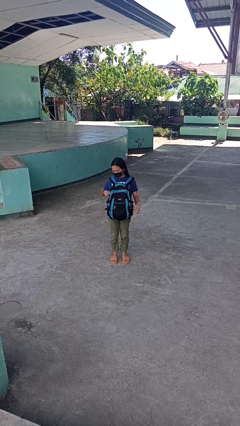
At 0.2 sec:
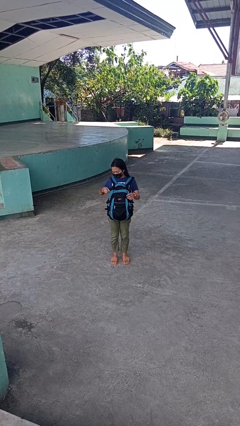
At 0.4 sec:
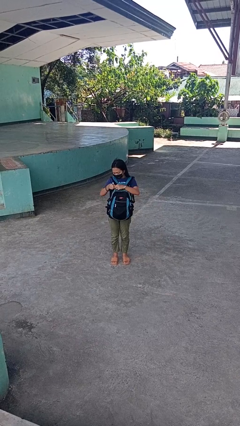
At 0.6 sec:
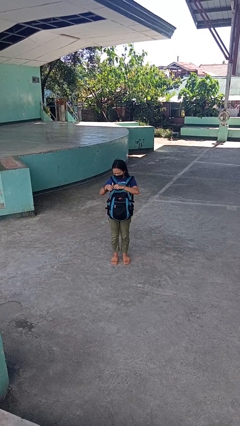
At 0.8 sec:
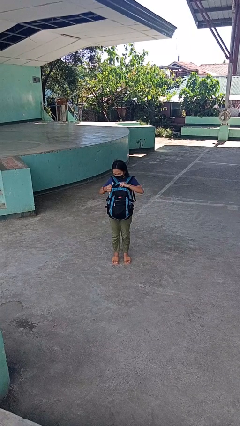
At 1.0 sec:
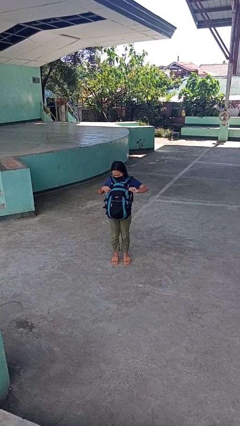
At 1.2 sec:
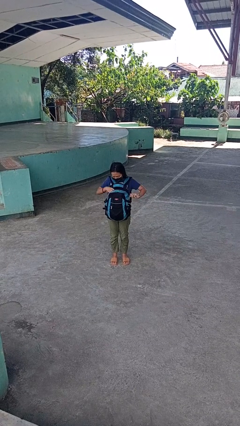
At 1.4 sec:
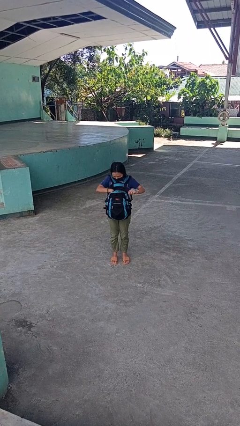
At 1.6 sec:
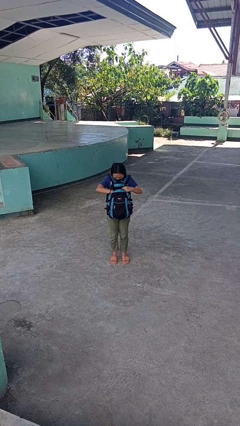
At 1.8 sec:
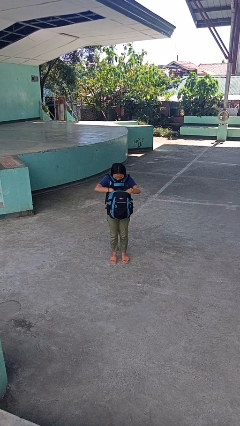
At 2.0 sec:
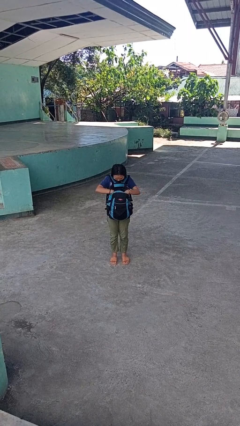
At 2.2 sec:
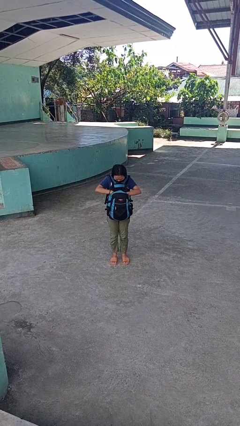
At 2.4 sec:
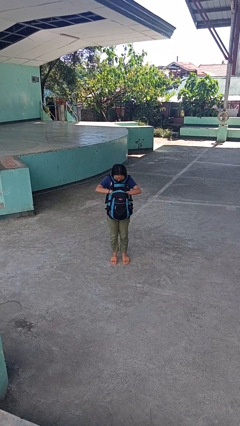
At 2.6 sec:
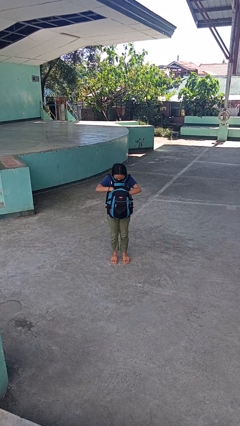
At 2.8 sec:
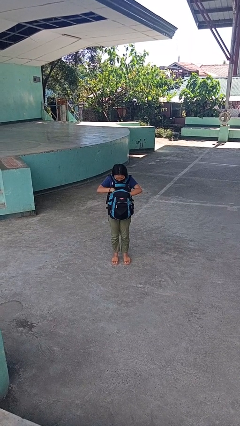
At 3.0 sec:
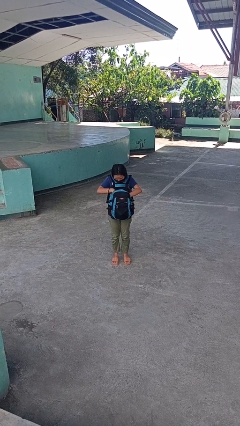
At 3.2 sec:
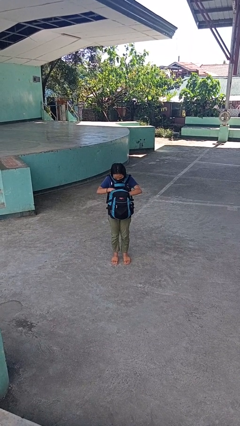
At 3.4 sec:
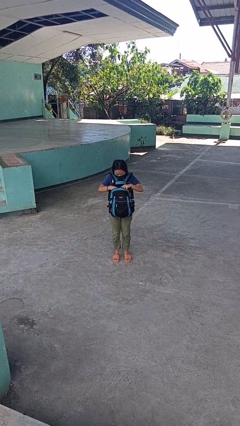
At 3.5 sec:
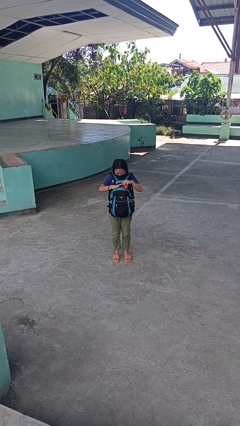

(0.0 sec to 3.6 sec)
person searches in backpack

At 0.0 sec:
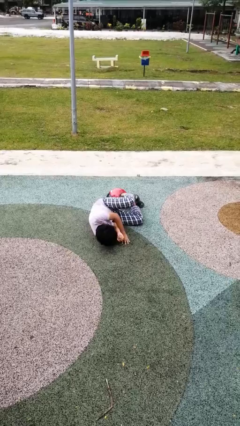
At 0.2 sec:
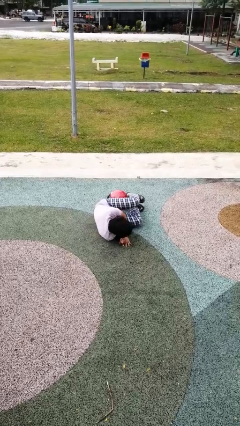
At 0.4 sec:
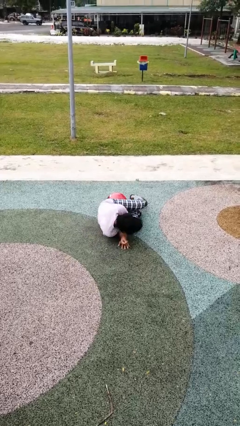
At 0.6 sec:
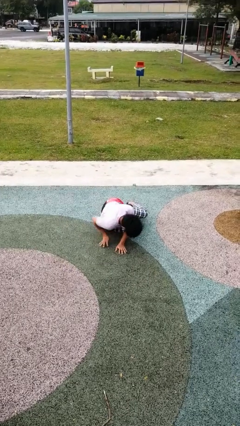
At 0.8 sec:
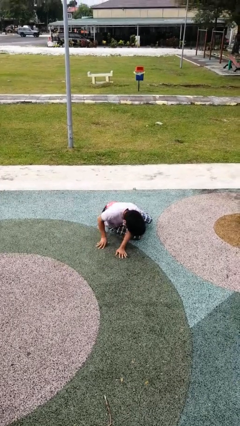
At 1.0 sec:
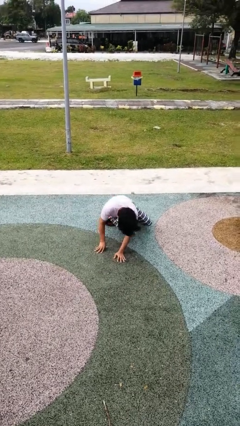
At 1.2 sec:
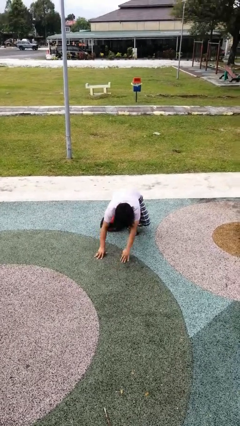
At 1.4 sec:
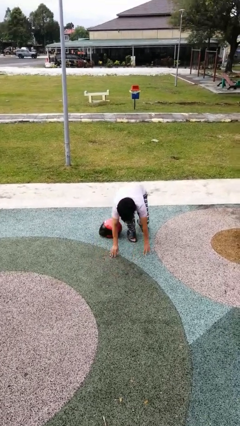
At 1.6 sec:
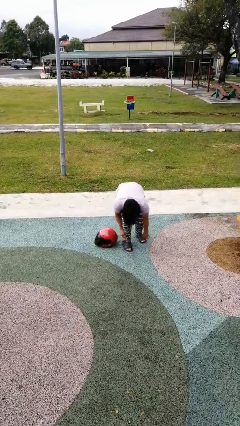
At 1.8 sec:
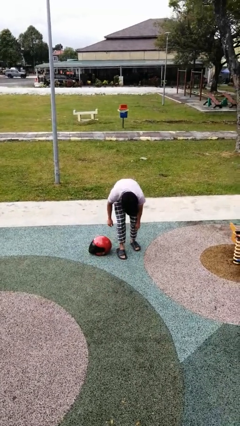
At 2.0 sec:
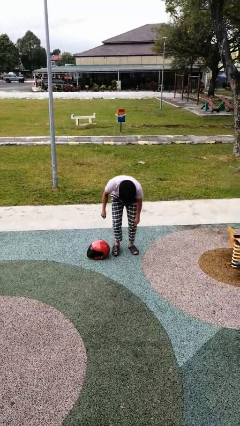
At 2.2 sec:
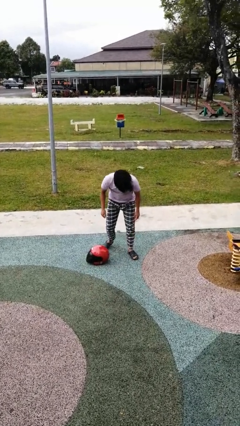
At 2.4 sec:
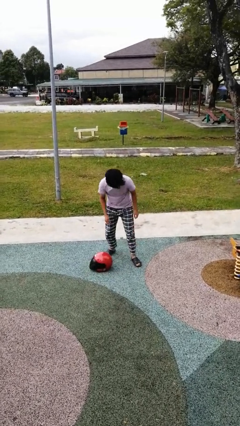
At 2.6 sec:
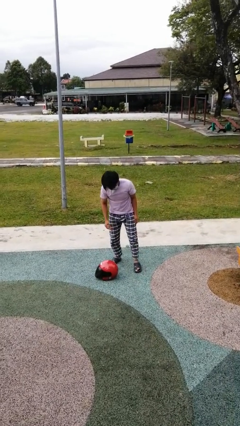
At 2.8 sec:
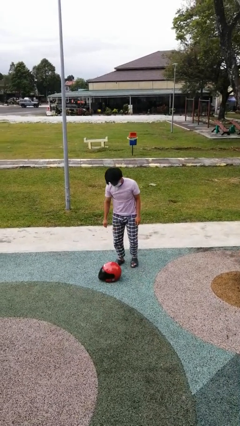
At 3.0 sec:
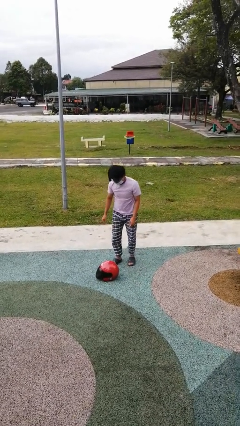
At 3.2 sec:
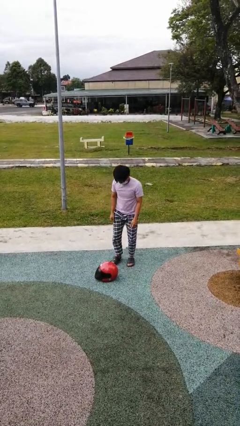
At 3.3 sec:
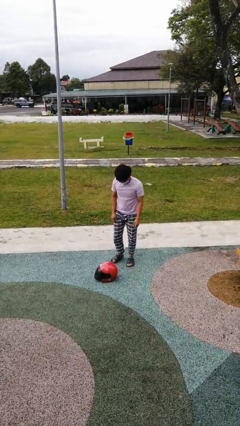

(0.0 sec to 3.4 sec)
person stands up from floor

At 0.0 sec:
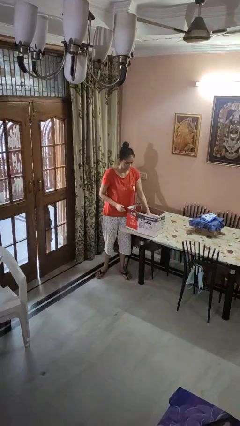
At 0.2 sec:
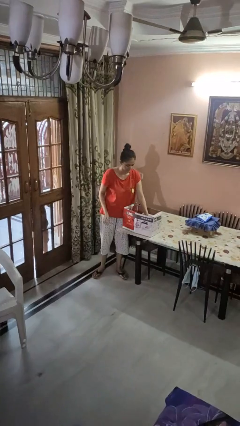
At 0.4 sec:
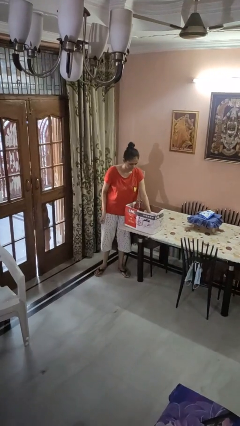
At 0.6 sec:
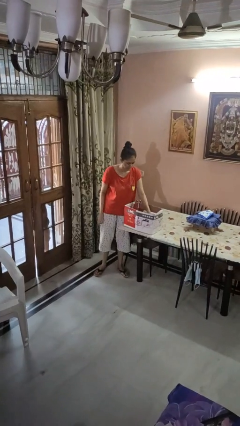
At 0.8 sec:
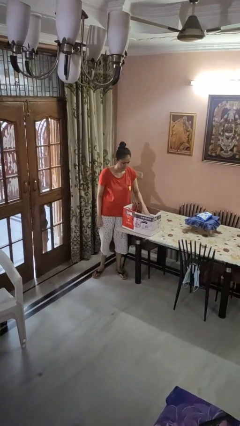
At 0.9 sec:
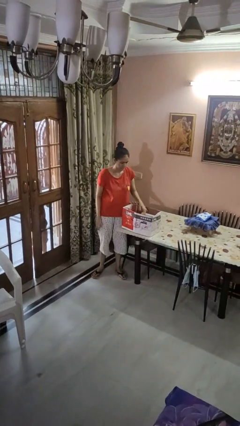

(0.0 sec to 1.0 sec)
person puts object into box

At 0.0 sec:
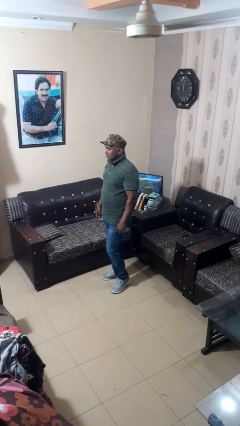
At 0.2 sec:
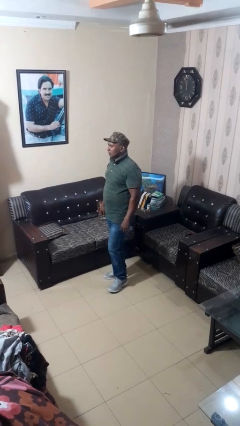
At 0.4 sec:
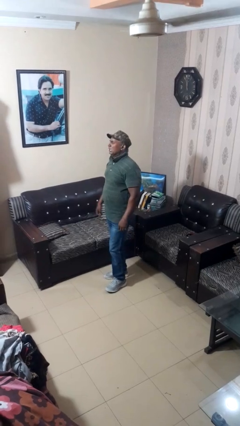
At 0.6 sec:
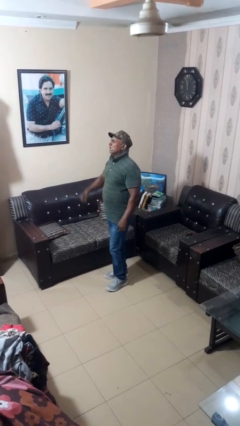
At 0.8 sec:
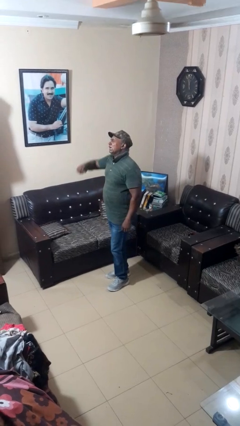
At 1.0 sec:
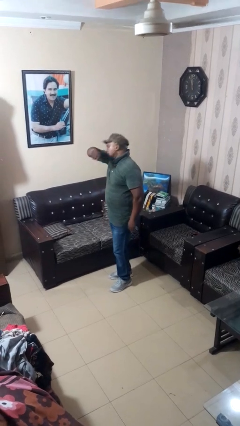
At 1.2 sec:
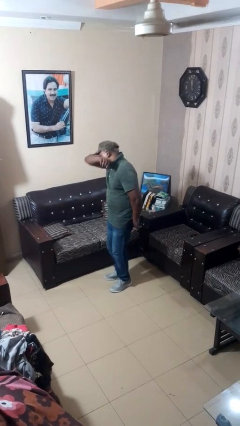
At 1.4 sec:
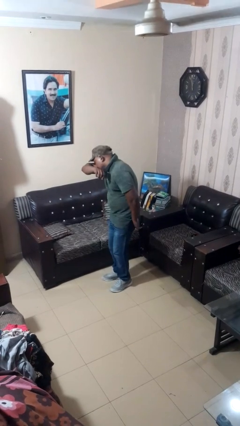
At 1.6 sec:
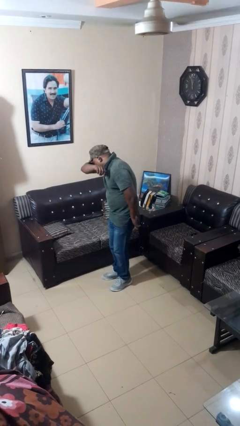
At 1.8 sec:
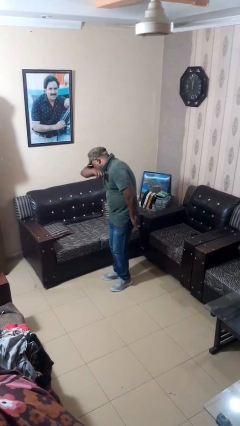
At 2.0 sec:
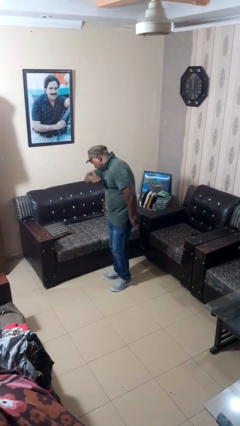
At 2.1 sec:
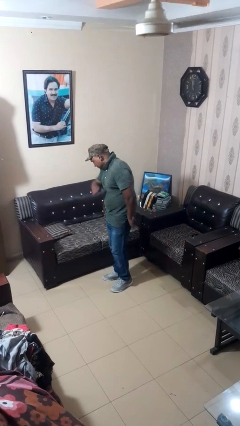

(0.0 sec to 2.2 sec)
person sneezes into arm

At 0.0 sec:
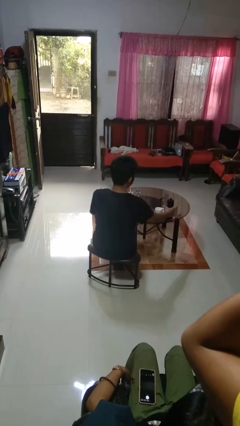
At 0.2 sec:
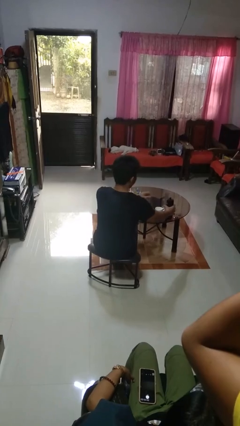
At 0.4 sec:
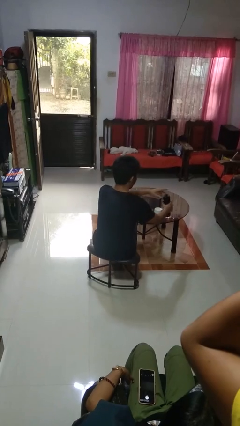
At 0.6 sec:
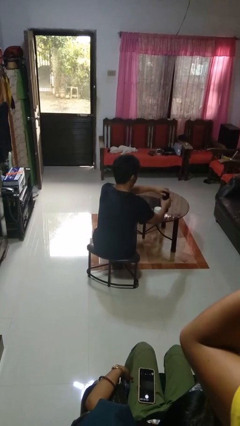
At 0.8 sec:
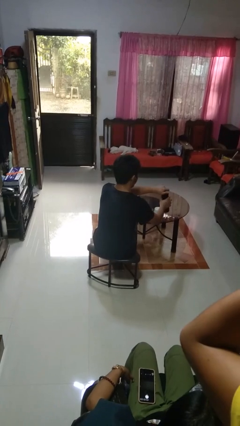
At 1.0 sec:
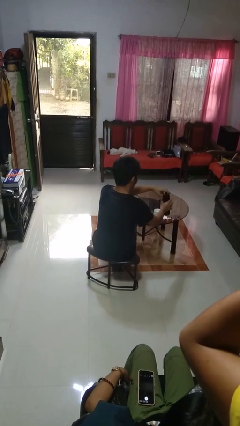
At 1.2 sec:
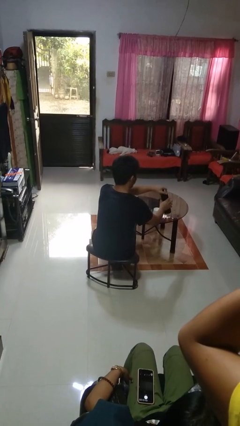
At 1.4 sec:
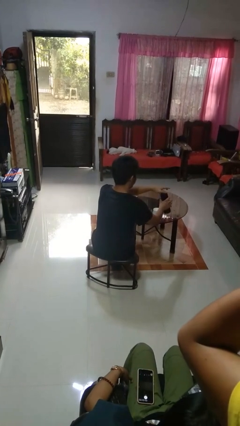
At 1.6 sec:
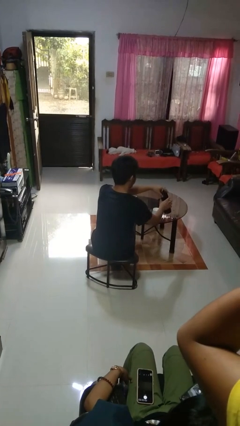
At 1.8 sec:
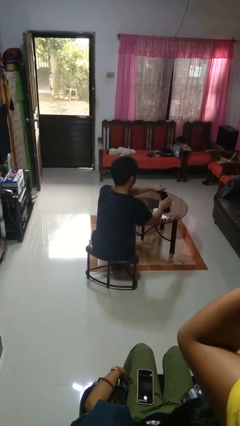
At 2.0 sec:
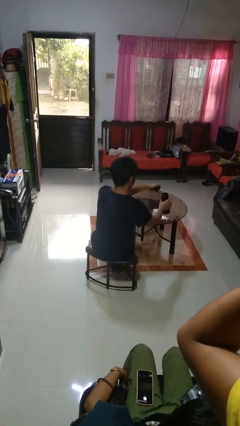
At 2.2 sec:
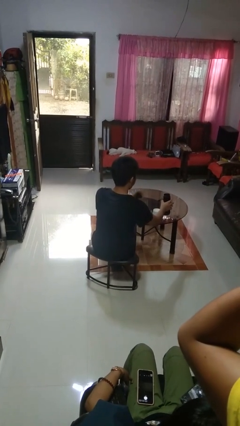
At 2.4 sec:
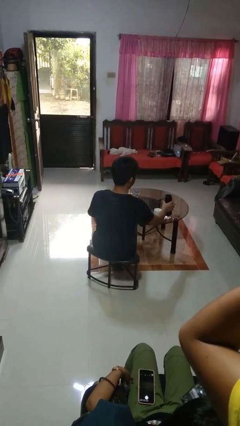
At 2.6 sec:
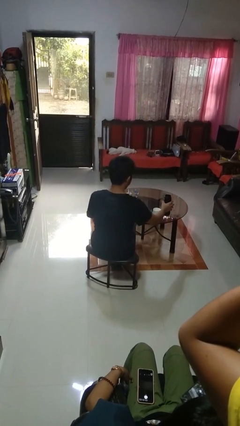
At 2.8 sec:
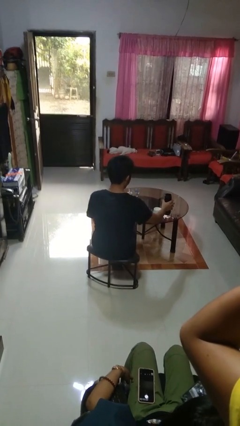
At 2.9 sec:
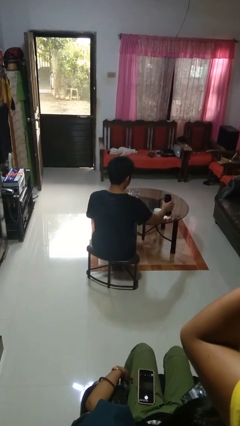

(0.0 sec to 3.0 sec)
person unscrews lid from bottle

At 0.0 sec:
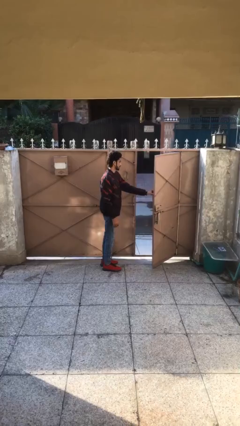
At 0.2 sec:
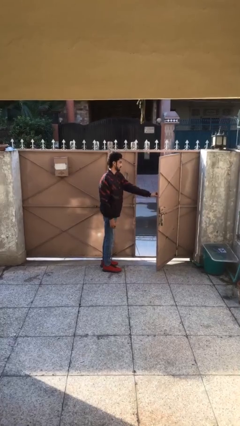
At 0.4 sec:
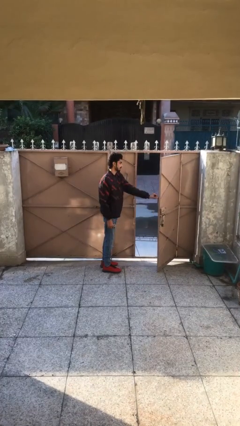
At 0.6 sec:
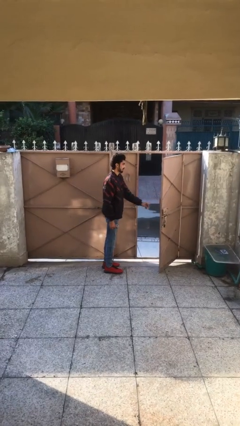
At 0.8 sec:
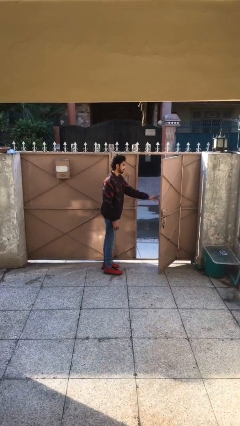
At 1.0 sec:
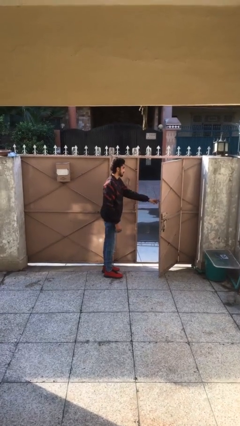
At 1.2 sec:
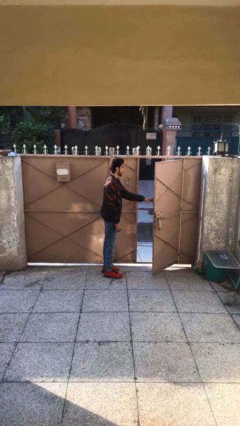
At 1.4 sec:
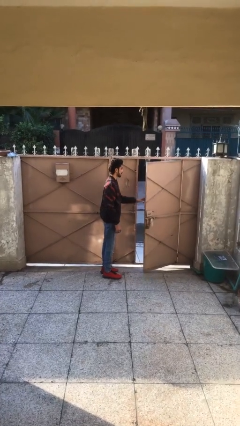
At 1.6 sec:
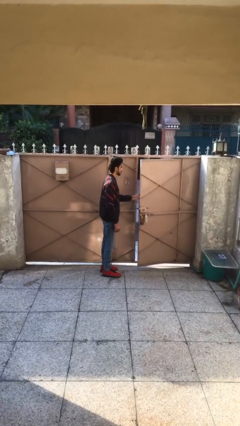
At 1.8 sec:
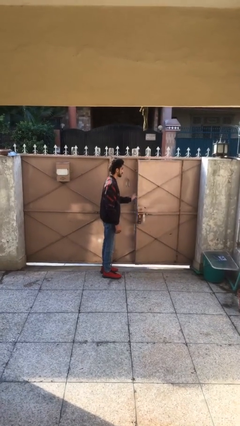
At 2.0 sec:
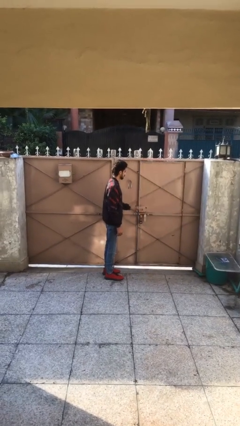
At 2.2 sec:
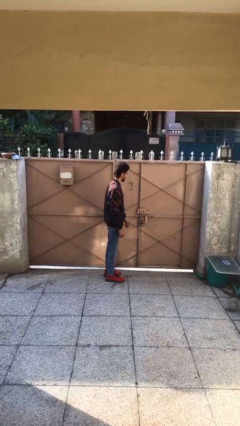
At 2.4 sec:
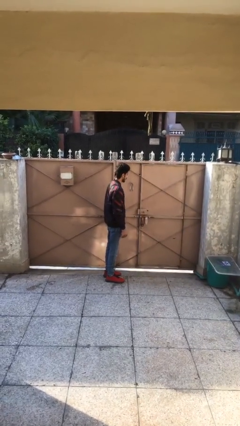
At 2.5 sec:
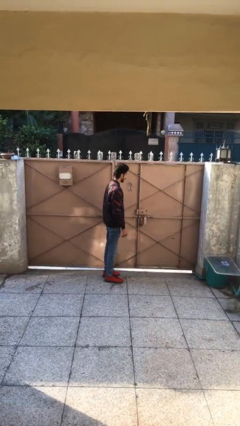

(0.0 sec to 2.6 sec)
person closes facility door

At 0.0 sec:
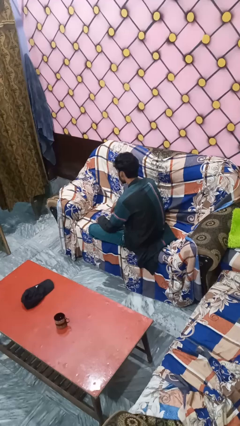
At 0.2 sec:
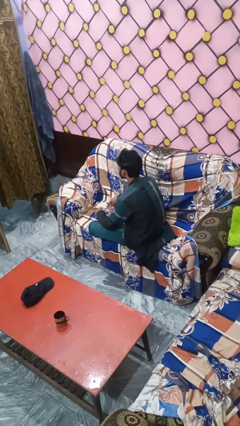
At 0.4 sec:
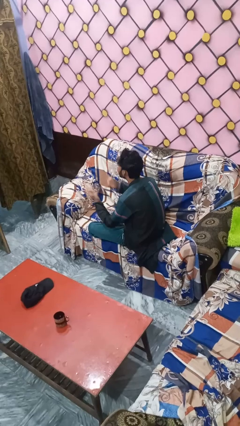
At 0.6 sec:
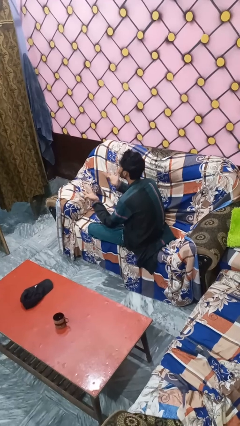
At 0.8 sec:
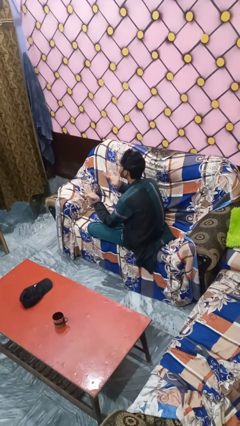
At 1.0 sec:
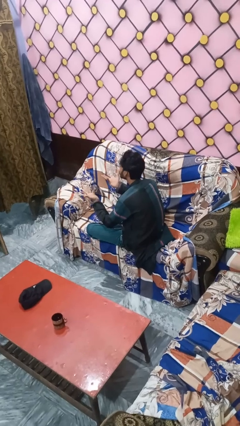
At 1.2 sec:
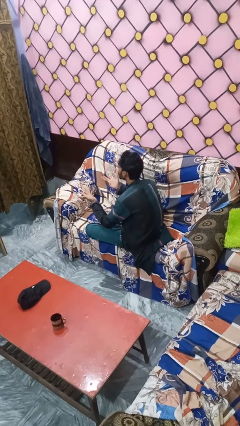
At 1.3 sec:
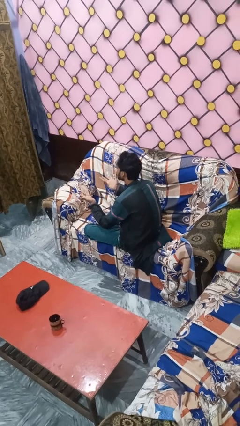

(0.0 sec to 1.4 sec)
person holds object above head
